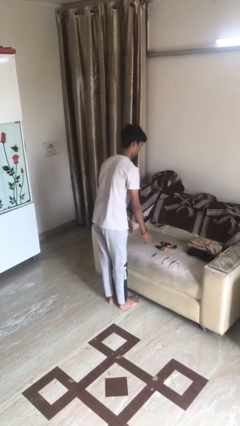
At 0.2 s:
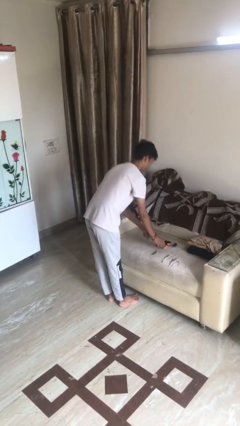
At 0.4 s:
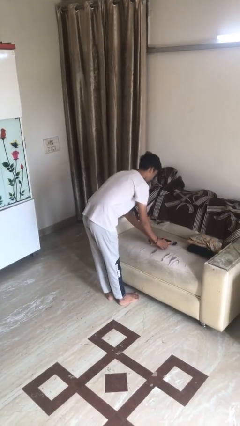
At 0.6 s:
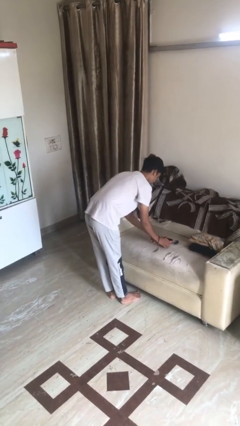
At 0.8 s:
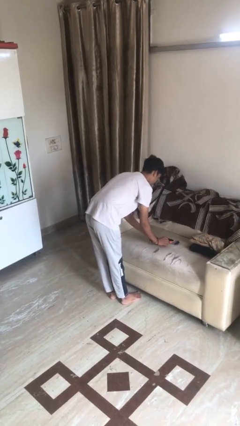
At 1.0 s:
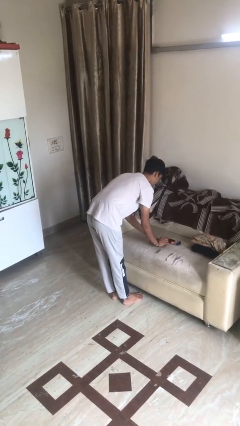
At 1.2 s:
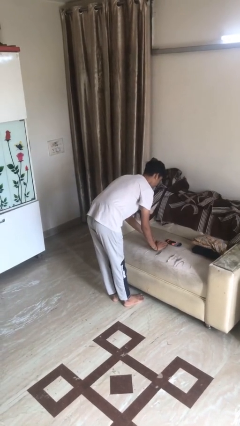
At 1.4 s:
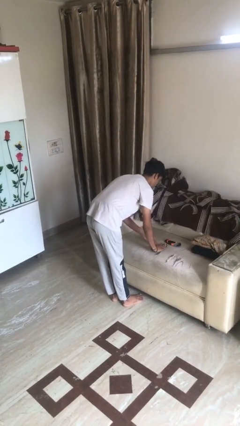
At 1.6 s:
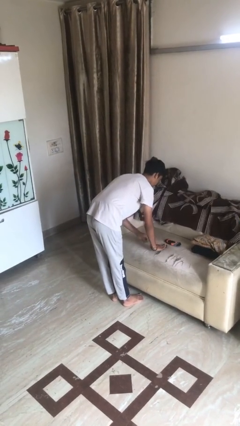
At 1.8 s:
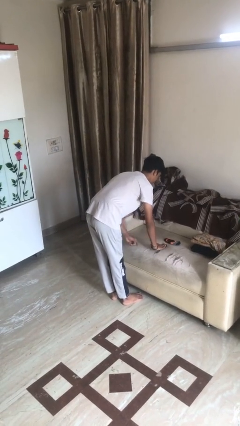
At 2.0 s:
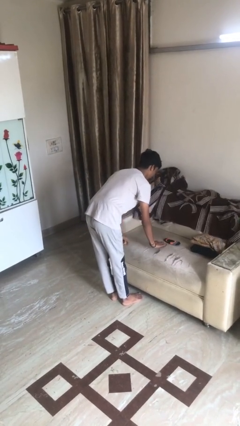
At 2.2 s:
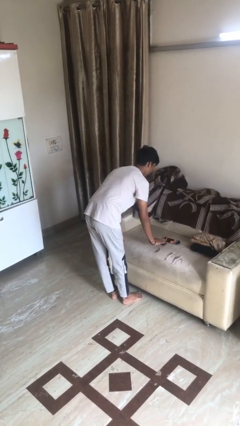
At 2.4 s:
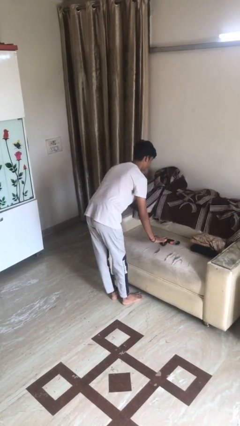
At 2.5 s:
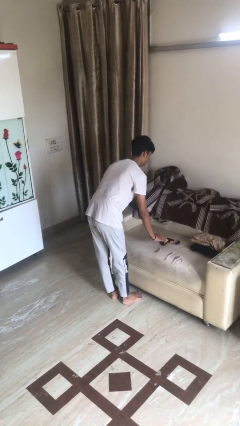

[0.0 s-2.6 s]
person folds socks

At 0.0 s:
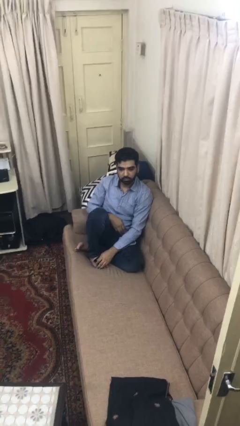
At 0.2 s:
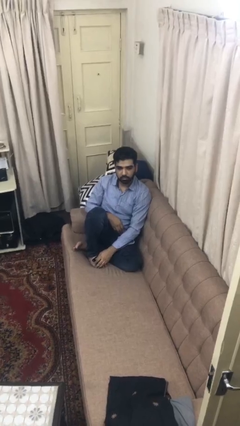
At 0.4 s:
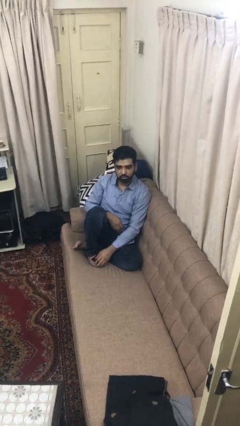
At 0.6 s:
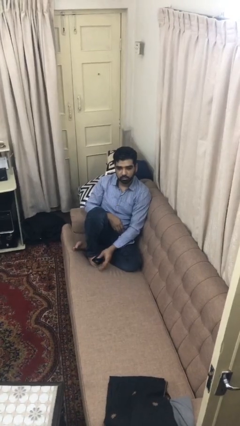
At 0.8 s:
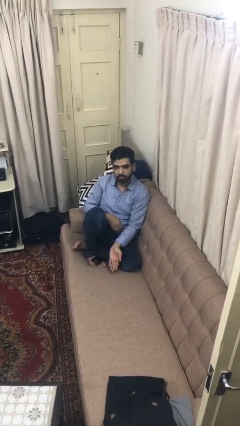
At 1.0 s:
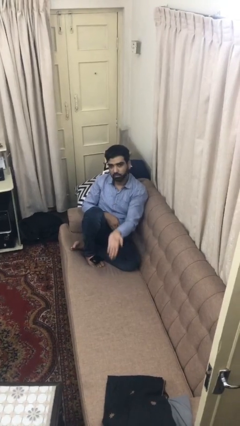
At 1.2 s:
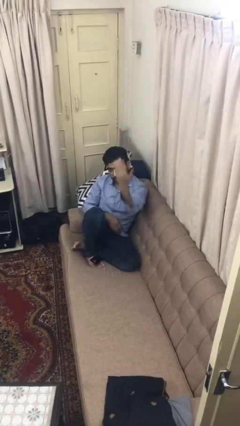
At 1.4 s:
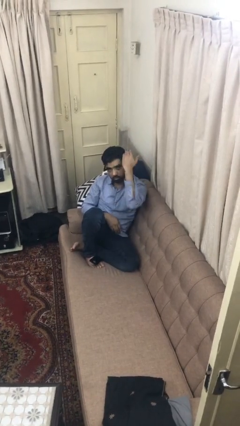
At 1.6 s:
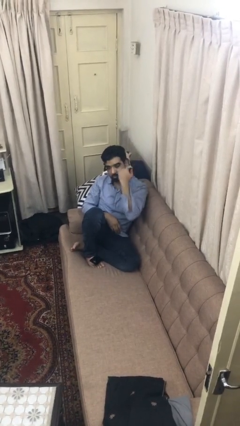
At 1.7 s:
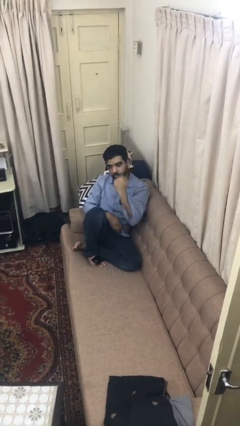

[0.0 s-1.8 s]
person gestures swipe up

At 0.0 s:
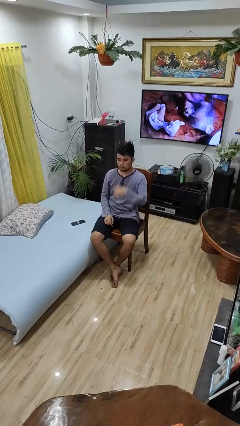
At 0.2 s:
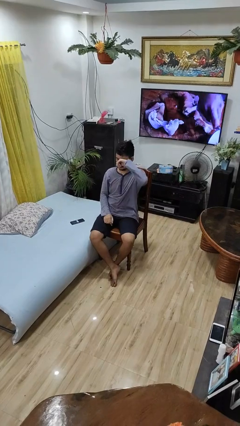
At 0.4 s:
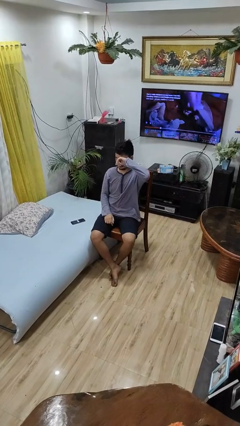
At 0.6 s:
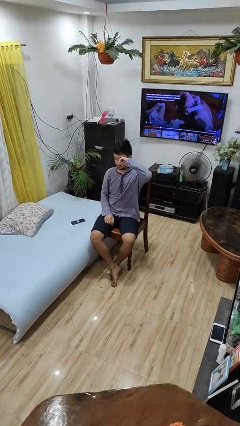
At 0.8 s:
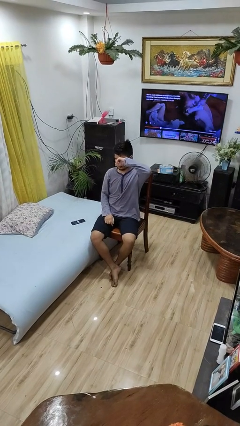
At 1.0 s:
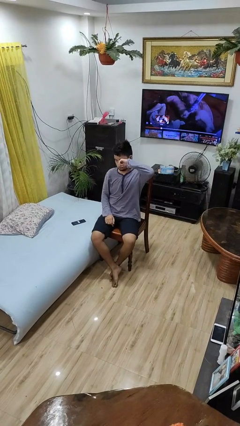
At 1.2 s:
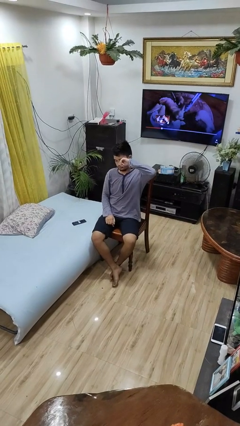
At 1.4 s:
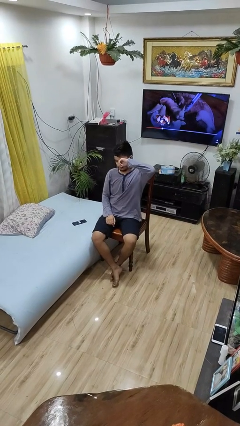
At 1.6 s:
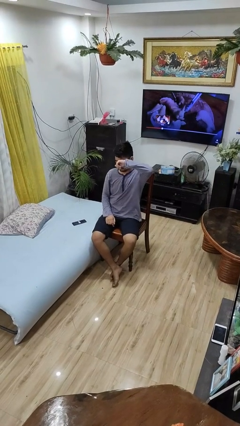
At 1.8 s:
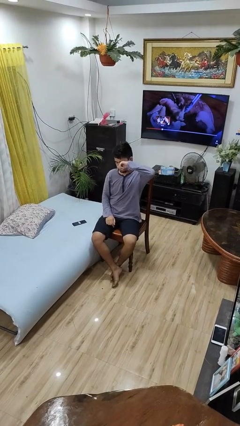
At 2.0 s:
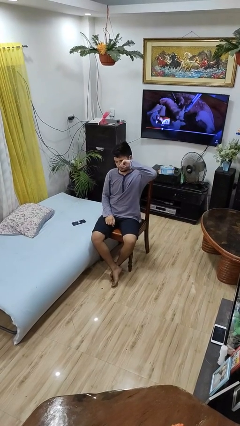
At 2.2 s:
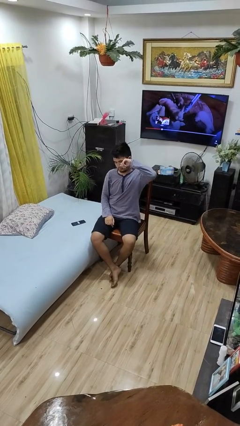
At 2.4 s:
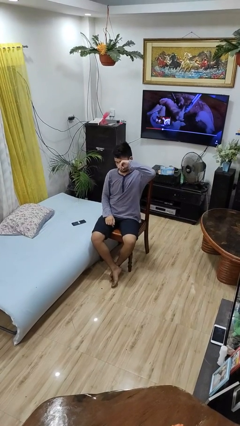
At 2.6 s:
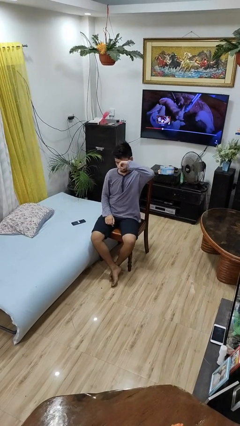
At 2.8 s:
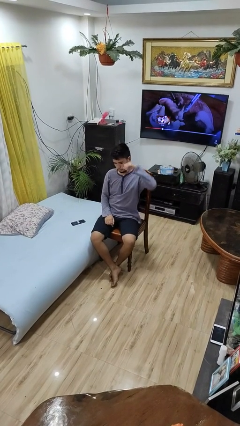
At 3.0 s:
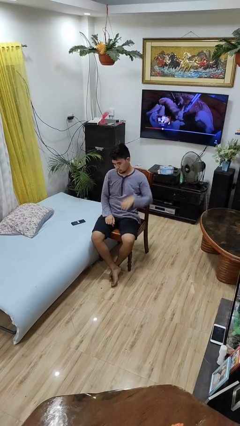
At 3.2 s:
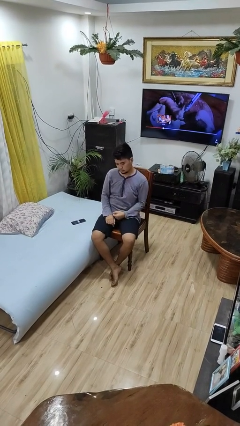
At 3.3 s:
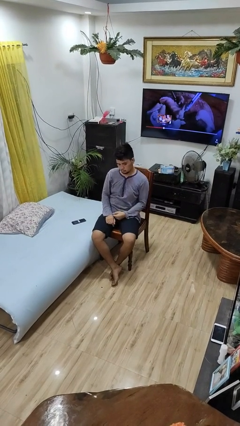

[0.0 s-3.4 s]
person rubs eyes

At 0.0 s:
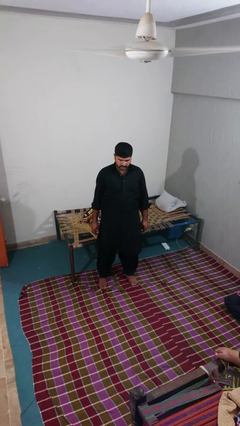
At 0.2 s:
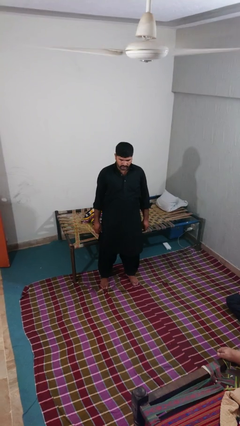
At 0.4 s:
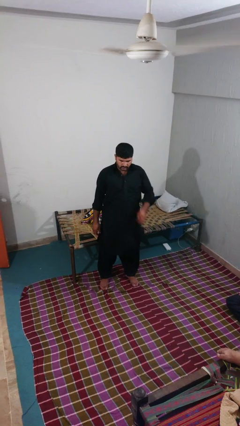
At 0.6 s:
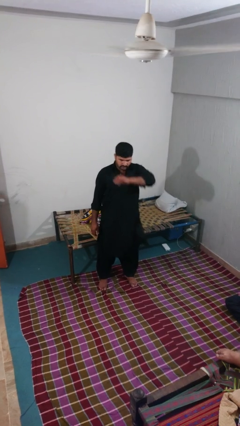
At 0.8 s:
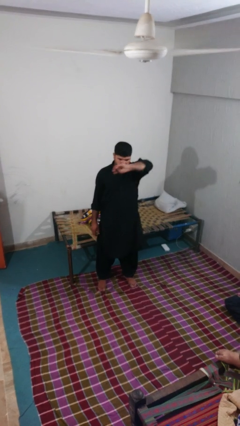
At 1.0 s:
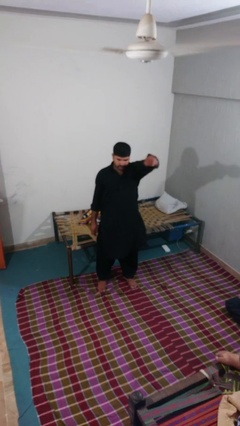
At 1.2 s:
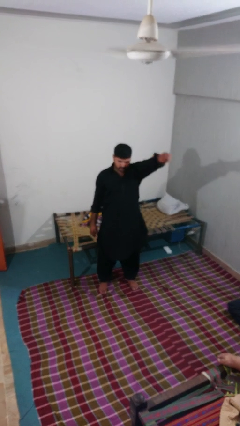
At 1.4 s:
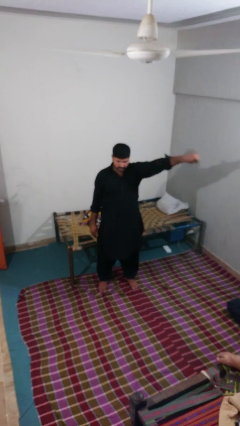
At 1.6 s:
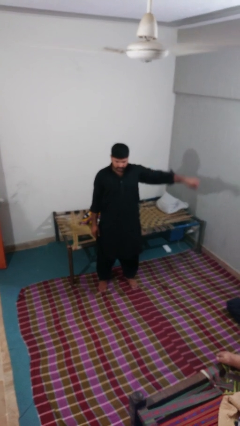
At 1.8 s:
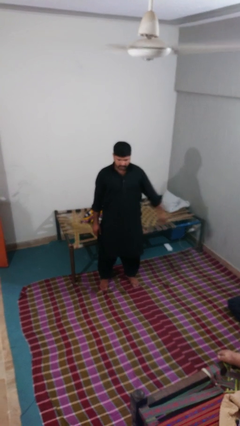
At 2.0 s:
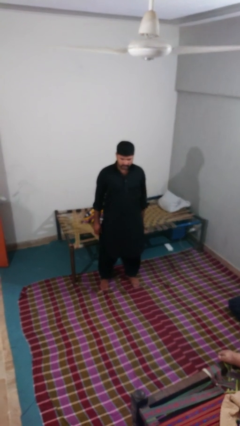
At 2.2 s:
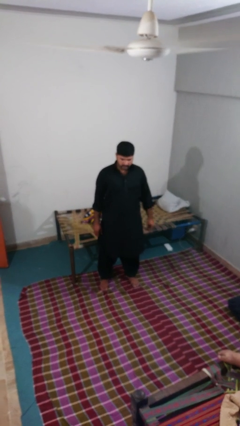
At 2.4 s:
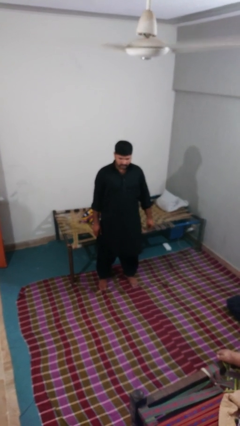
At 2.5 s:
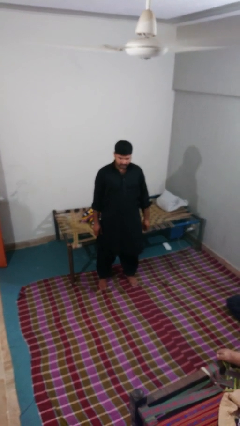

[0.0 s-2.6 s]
person gestures swipe left

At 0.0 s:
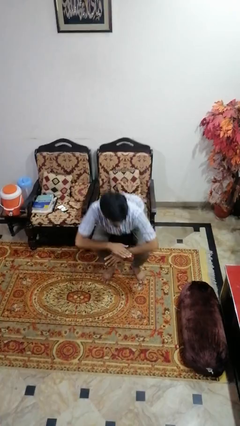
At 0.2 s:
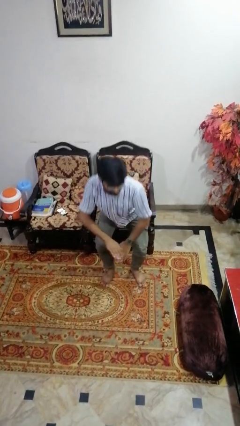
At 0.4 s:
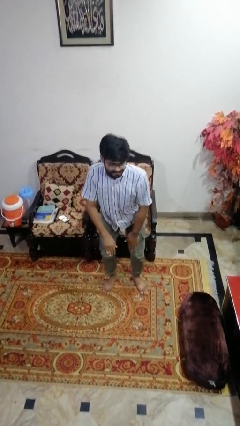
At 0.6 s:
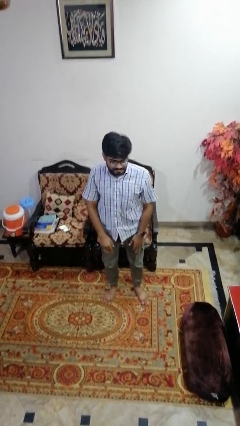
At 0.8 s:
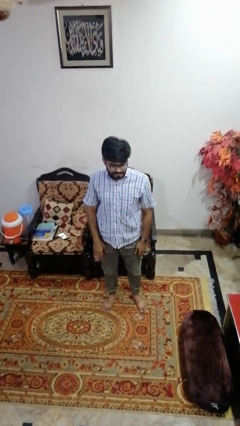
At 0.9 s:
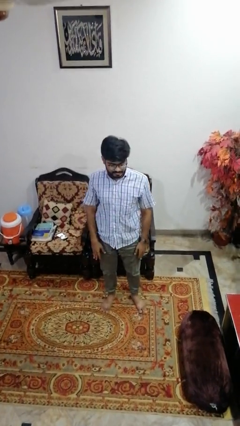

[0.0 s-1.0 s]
person stands up

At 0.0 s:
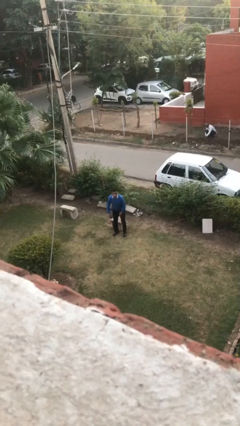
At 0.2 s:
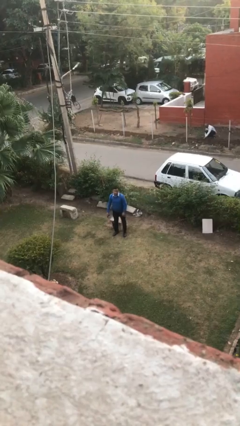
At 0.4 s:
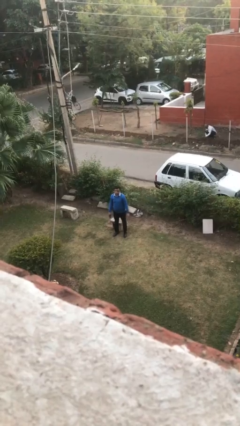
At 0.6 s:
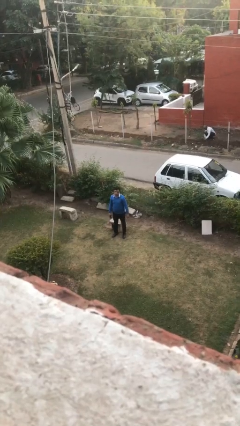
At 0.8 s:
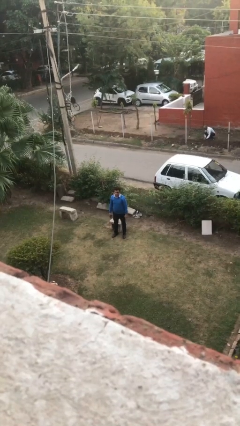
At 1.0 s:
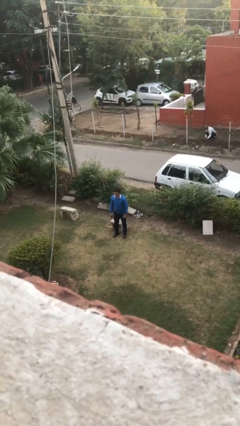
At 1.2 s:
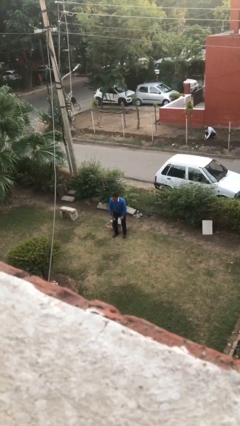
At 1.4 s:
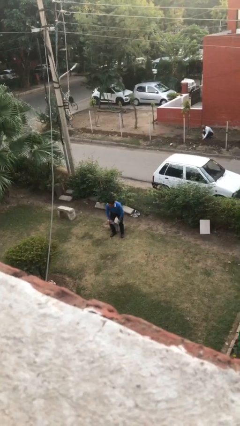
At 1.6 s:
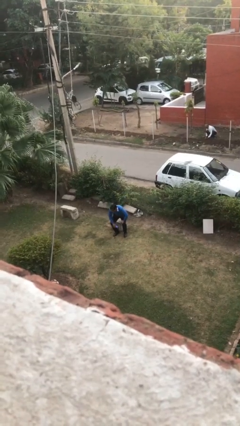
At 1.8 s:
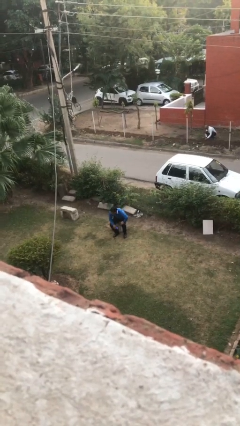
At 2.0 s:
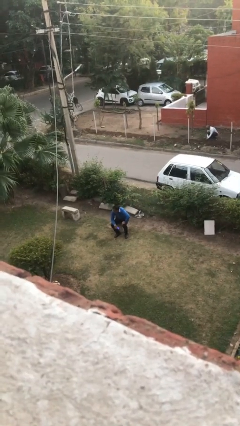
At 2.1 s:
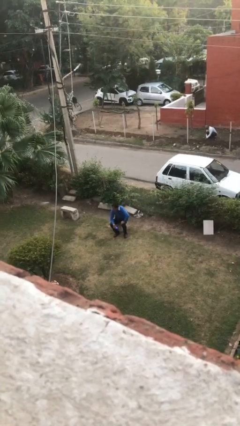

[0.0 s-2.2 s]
person sits down

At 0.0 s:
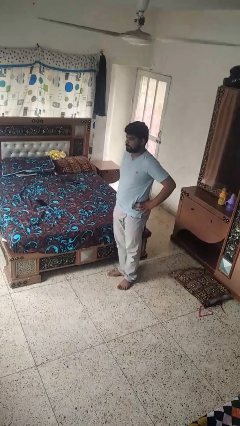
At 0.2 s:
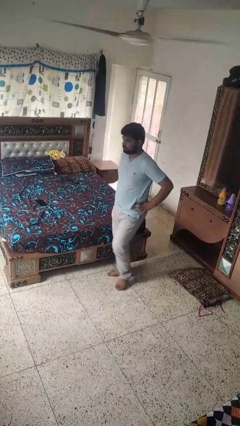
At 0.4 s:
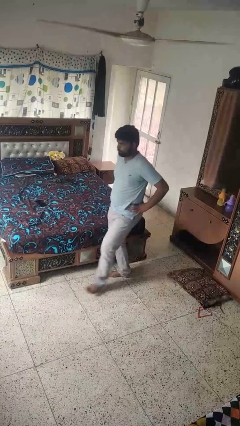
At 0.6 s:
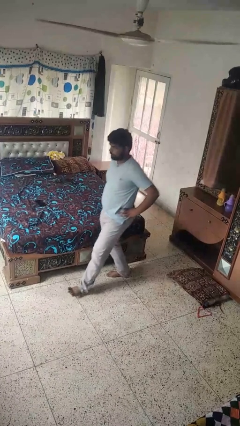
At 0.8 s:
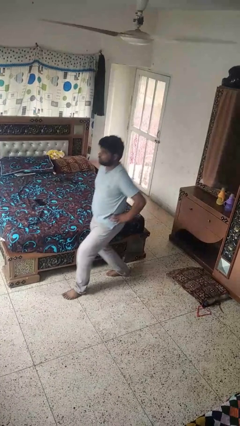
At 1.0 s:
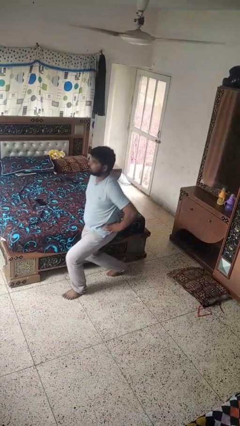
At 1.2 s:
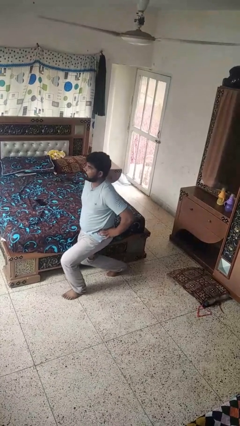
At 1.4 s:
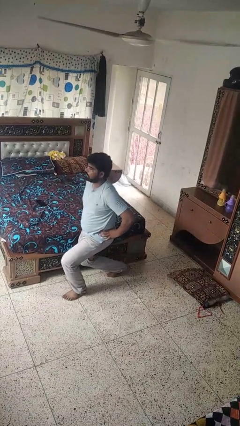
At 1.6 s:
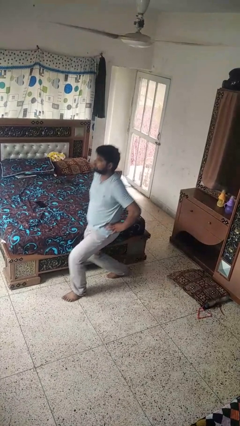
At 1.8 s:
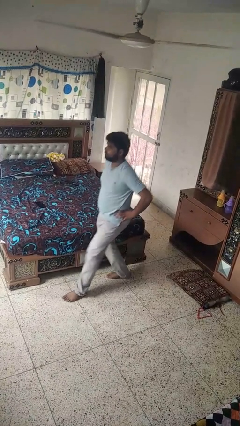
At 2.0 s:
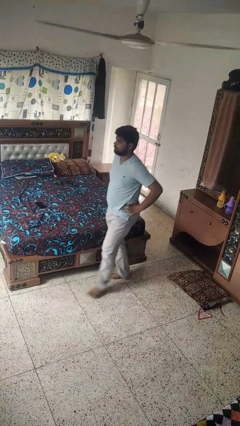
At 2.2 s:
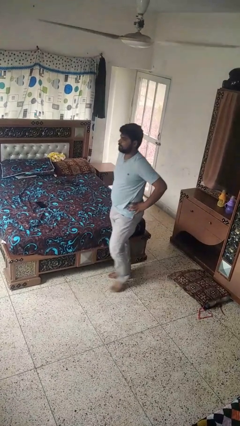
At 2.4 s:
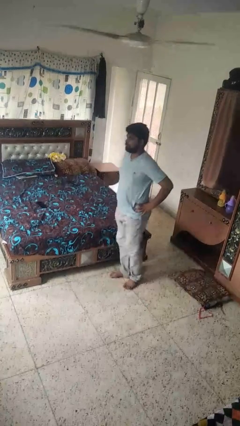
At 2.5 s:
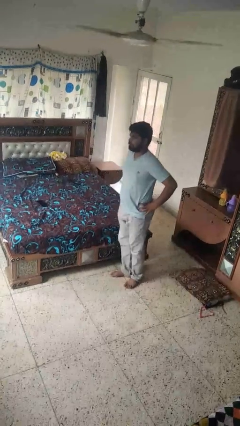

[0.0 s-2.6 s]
person exercises with lunges

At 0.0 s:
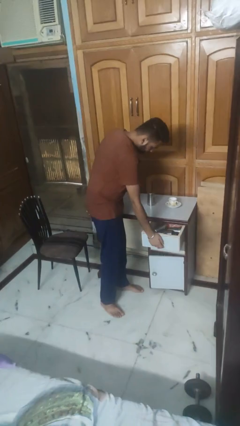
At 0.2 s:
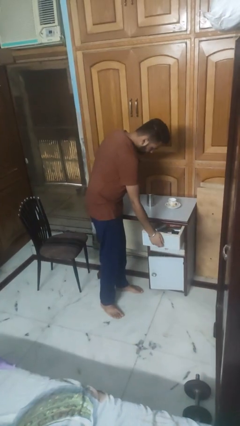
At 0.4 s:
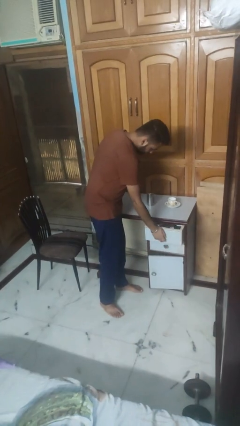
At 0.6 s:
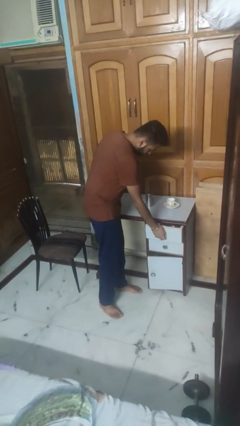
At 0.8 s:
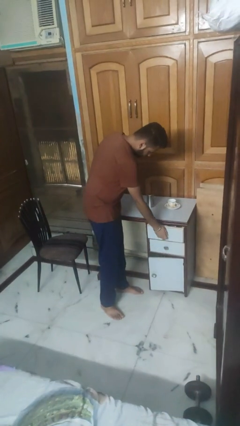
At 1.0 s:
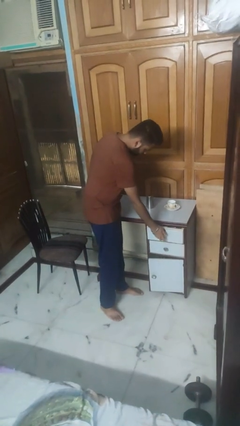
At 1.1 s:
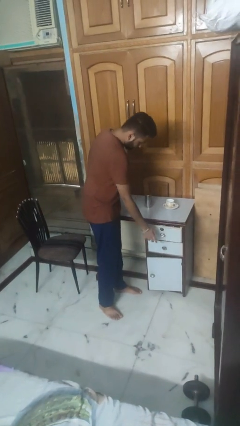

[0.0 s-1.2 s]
person closes kitchen drawer
